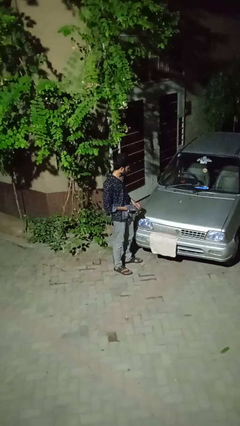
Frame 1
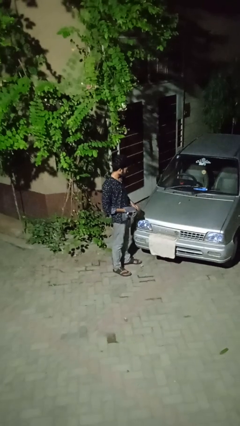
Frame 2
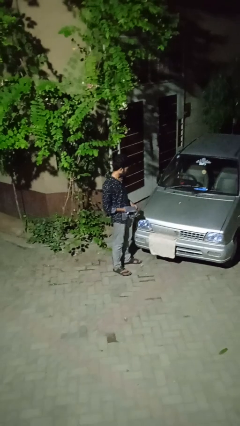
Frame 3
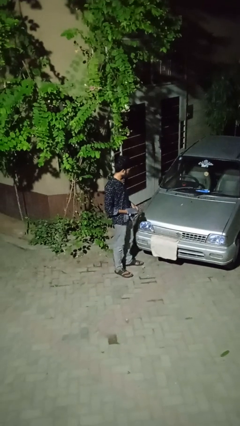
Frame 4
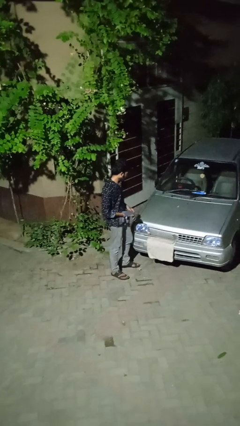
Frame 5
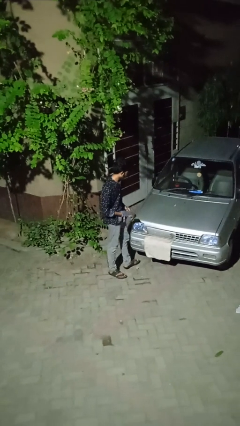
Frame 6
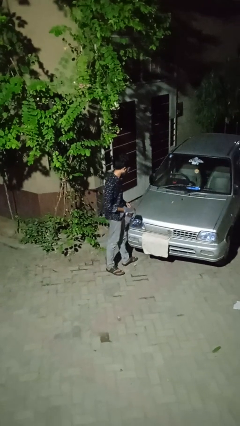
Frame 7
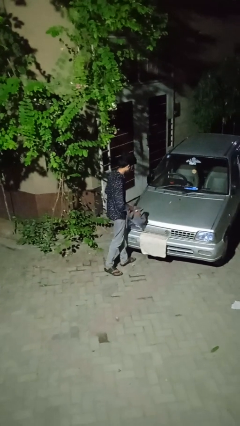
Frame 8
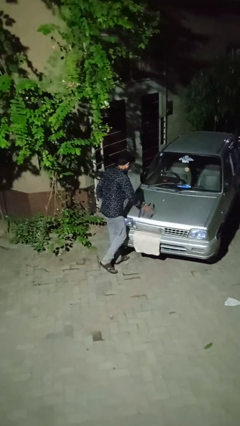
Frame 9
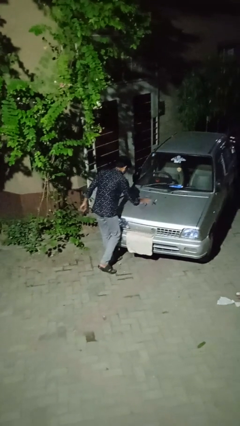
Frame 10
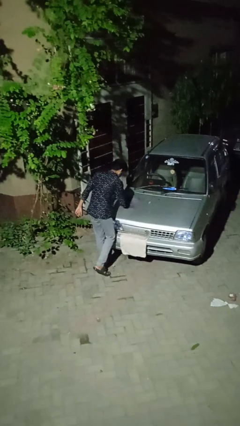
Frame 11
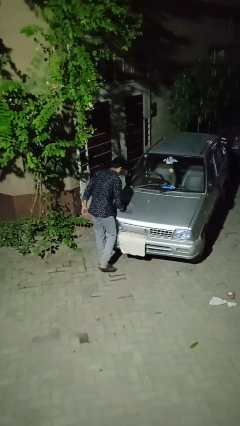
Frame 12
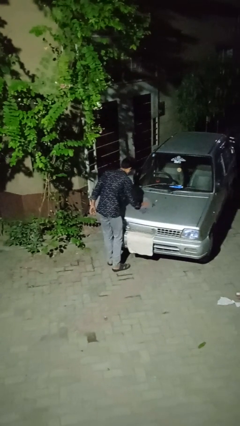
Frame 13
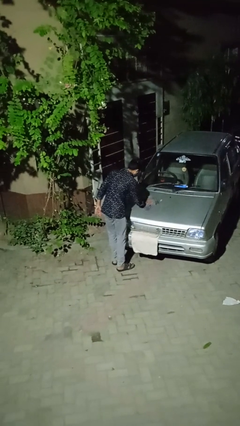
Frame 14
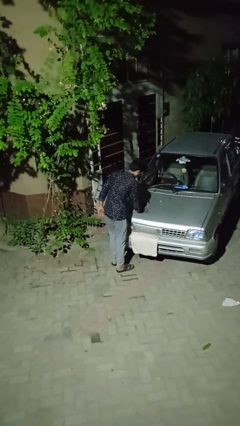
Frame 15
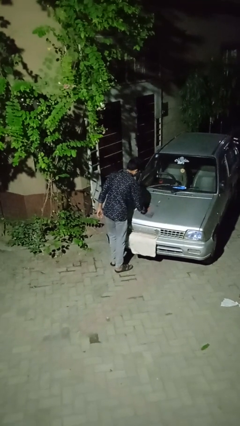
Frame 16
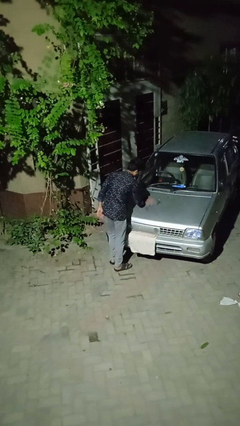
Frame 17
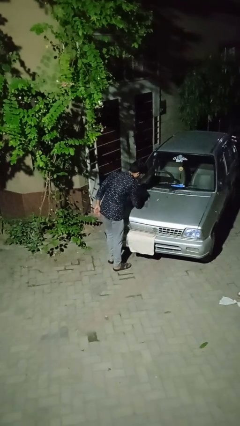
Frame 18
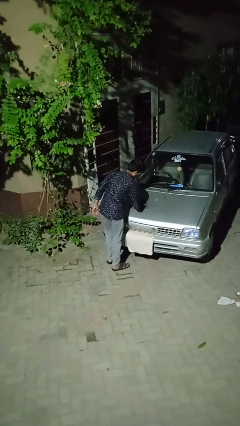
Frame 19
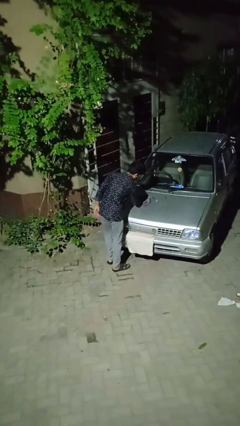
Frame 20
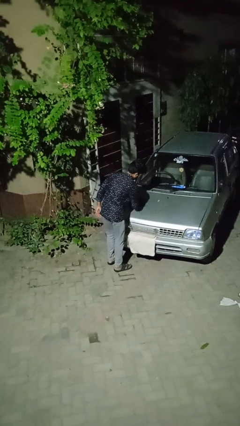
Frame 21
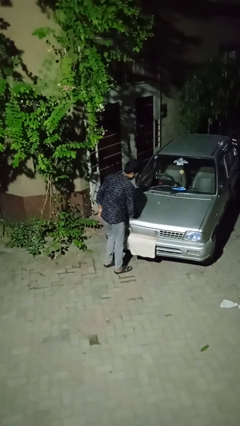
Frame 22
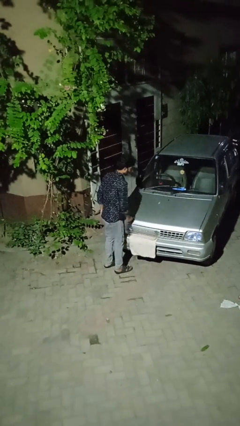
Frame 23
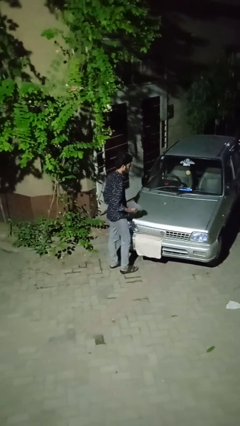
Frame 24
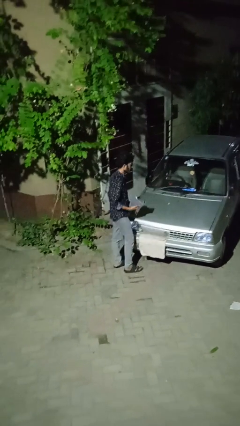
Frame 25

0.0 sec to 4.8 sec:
person polishes car with rag

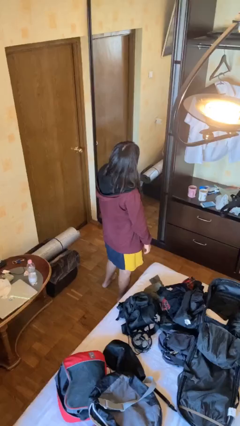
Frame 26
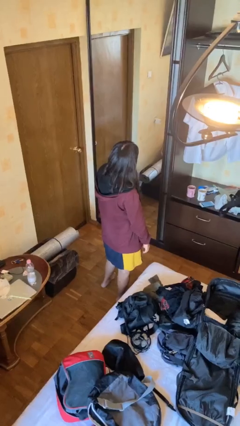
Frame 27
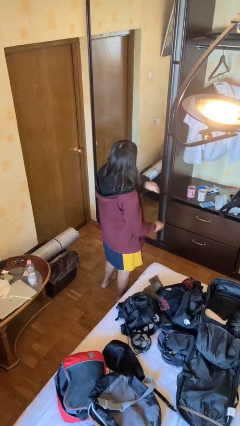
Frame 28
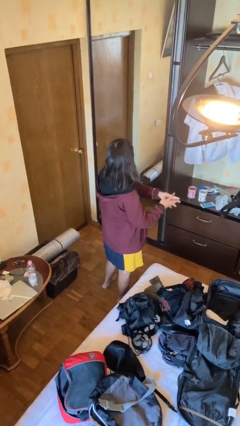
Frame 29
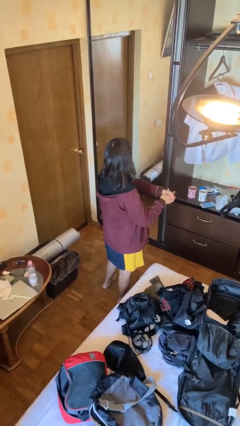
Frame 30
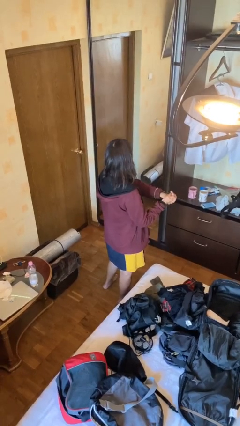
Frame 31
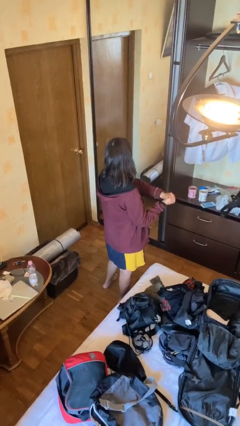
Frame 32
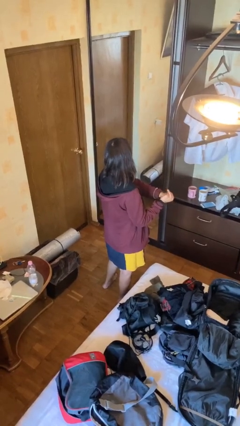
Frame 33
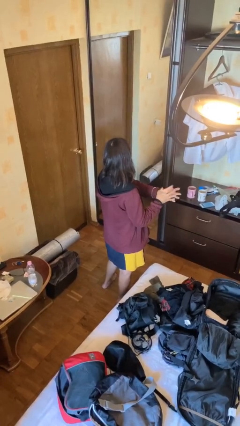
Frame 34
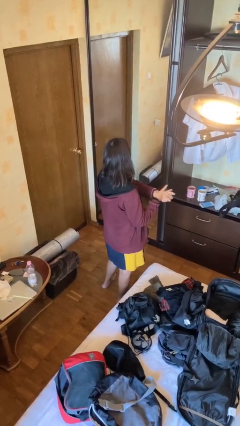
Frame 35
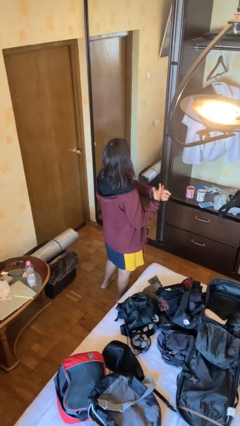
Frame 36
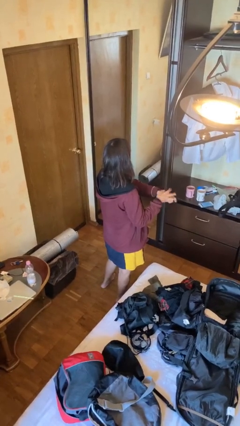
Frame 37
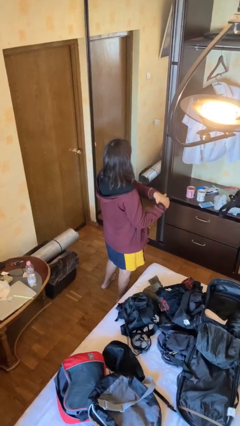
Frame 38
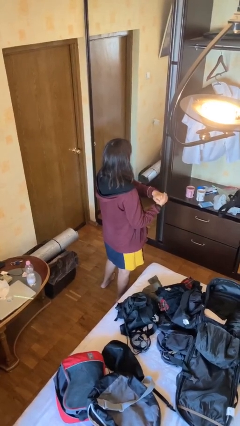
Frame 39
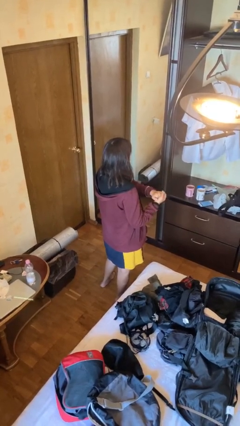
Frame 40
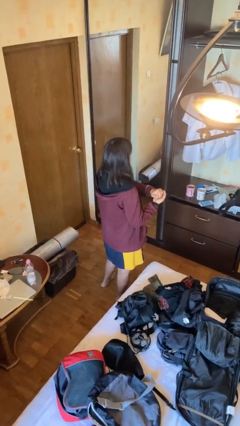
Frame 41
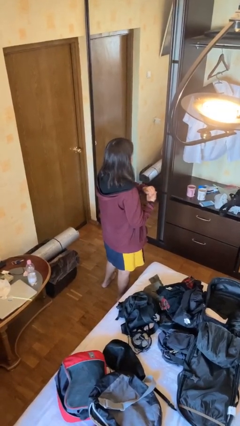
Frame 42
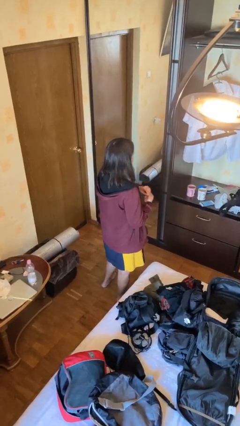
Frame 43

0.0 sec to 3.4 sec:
person cracks knuckles

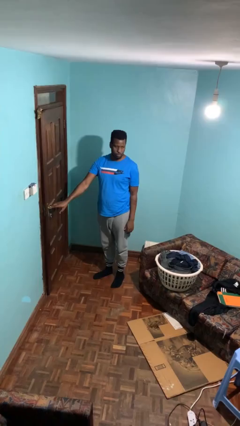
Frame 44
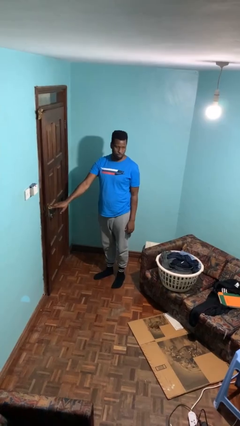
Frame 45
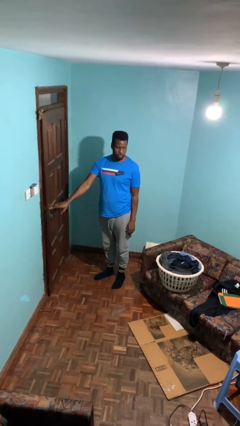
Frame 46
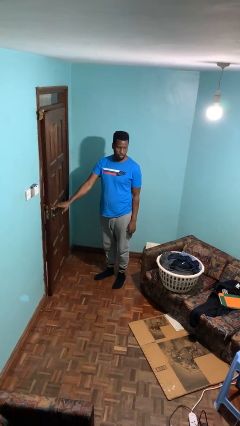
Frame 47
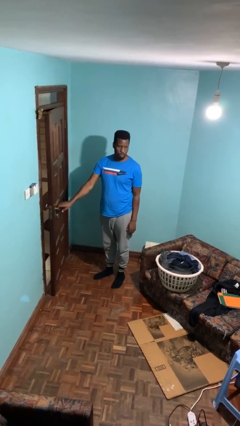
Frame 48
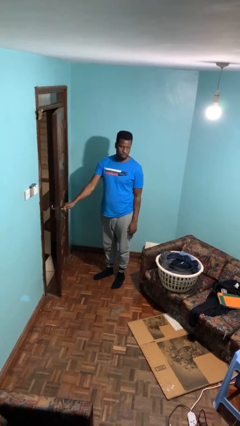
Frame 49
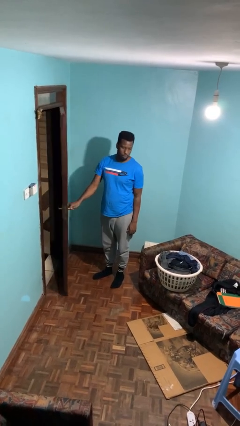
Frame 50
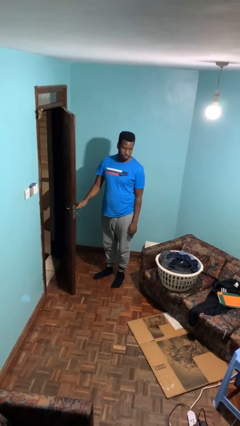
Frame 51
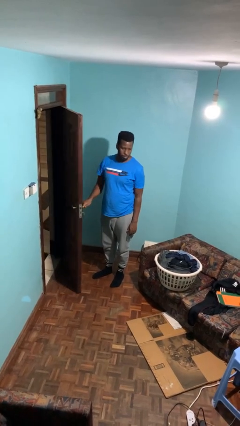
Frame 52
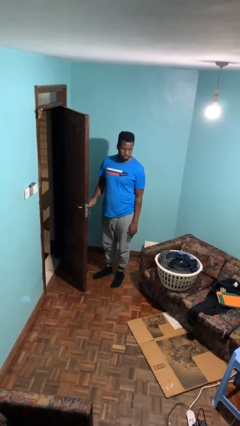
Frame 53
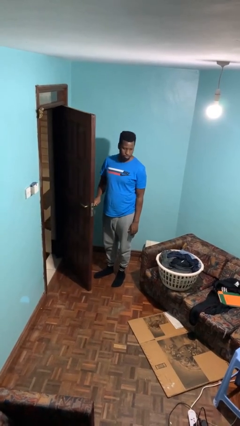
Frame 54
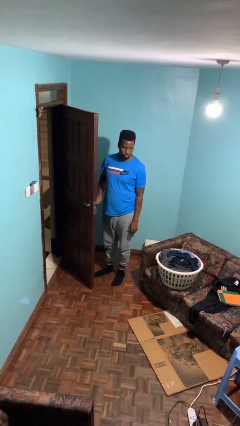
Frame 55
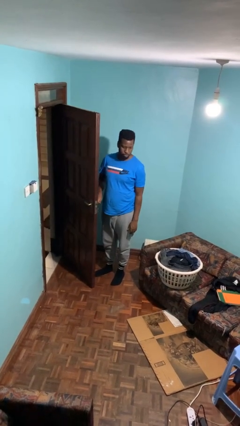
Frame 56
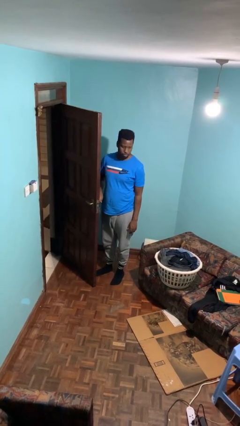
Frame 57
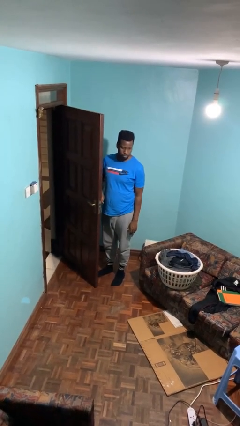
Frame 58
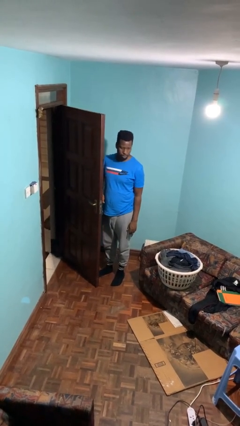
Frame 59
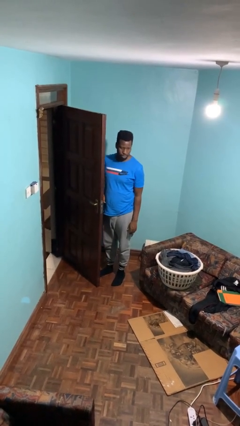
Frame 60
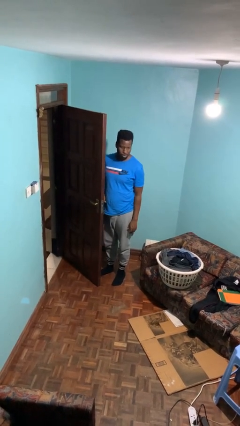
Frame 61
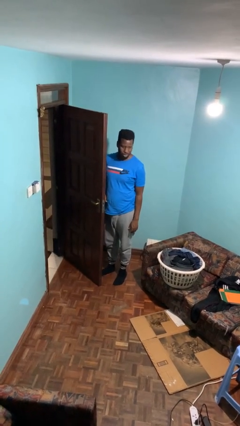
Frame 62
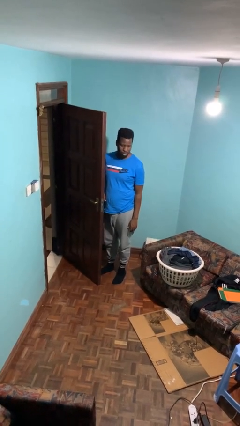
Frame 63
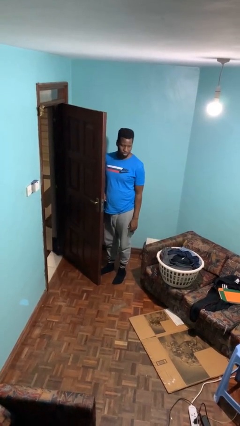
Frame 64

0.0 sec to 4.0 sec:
person opens facility door

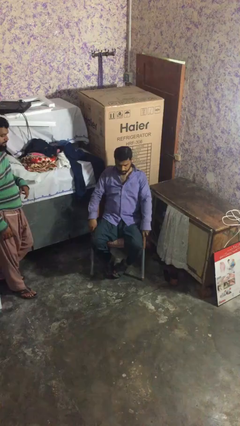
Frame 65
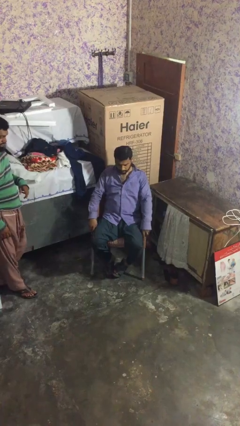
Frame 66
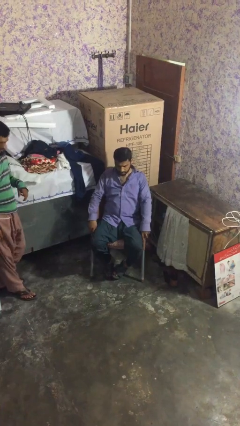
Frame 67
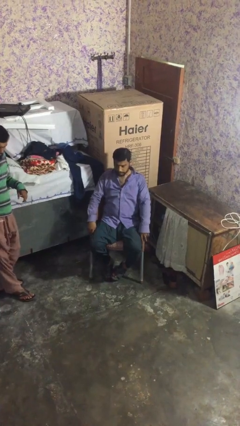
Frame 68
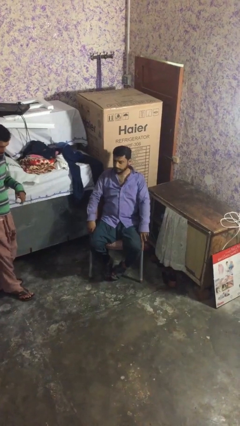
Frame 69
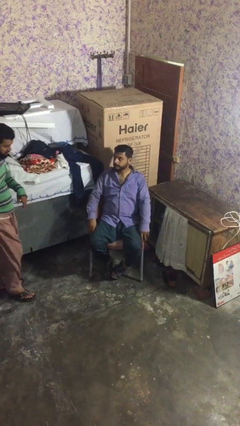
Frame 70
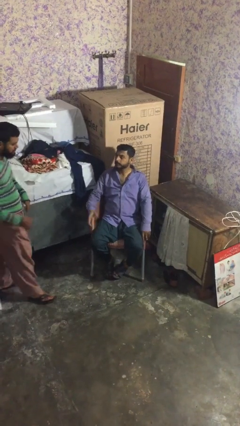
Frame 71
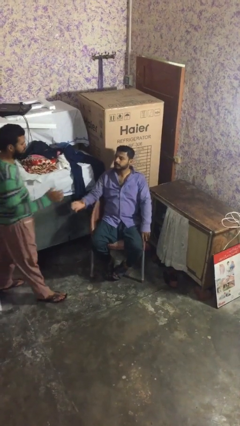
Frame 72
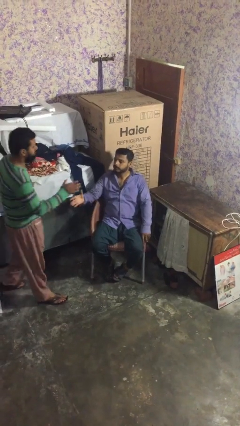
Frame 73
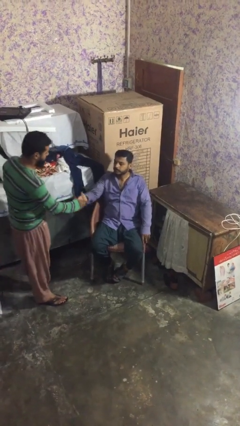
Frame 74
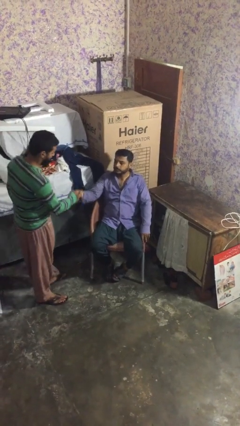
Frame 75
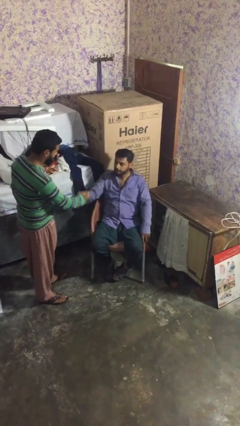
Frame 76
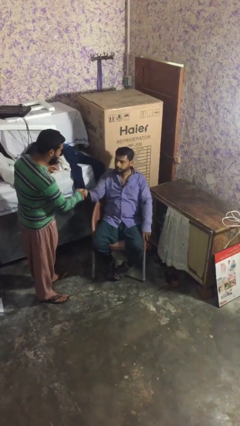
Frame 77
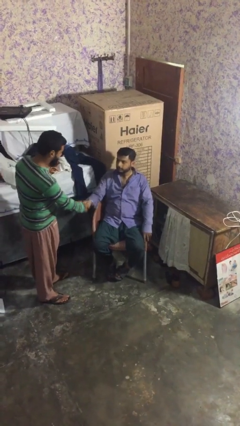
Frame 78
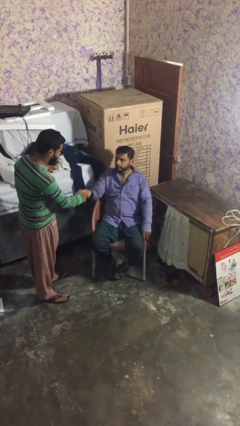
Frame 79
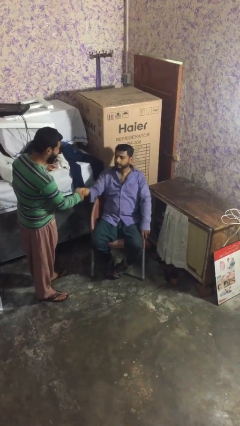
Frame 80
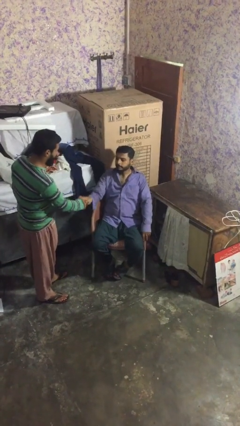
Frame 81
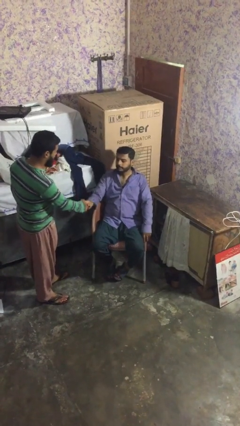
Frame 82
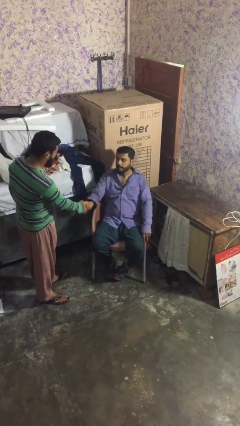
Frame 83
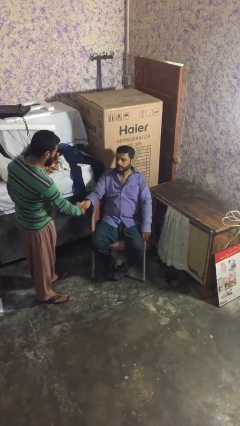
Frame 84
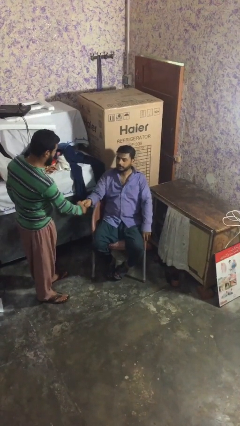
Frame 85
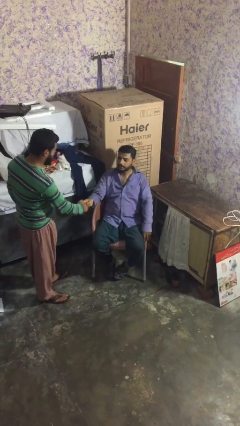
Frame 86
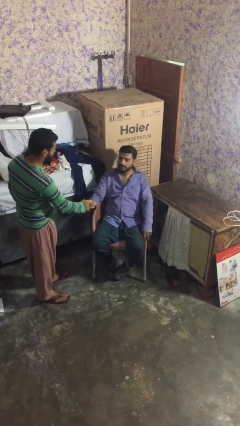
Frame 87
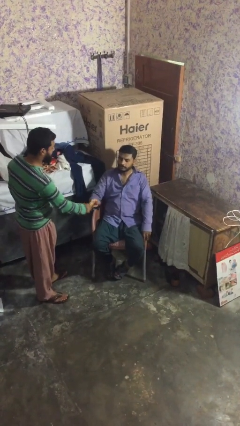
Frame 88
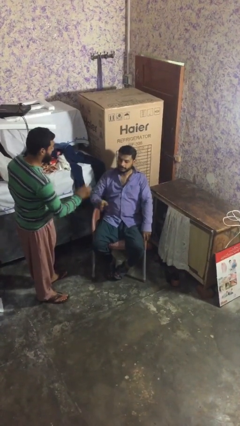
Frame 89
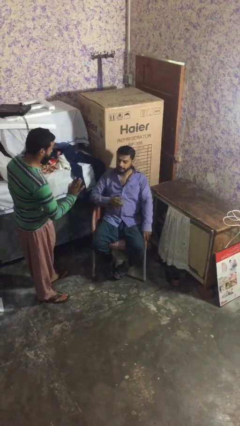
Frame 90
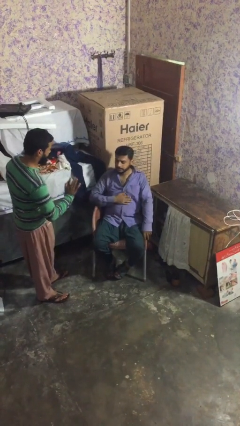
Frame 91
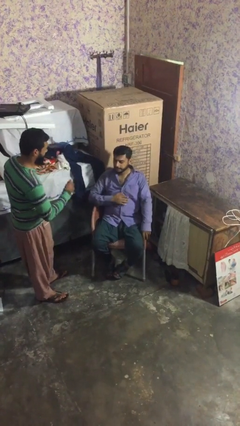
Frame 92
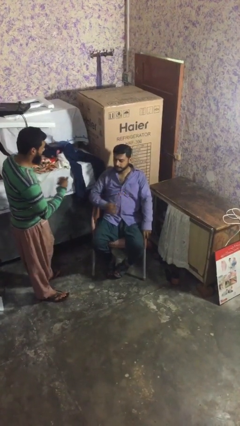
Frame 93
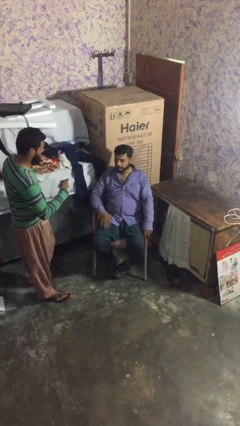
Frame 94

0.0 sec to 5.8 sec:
person shakes hand
